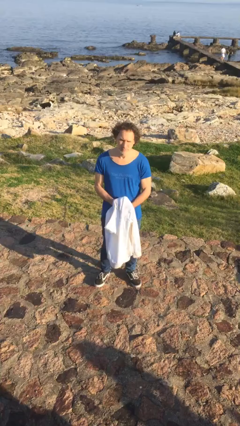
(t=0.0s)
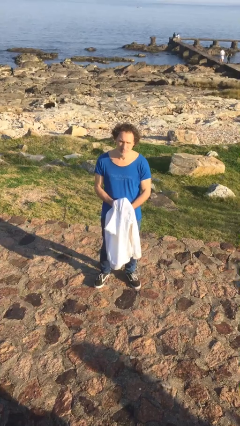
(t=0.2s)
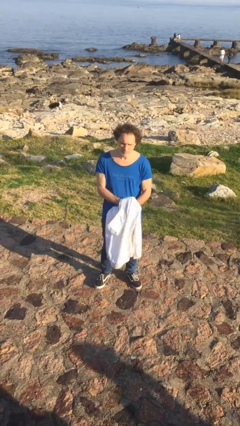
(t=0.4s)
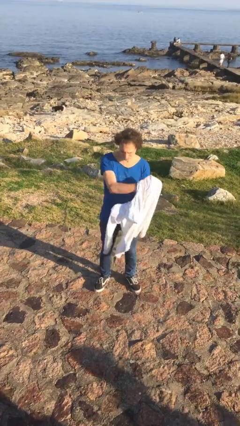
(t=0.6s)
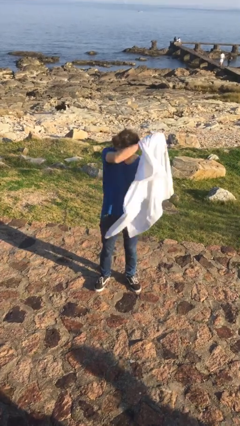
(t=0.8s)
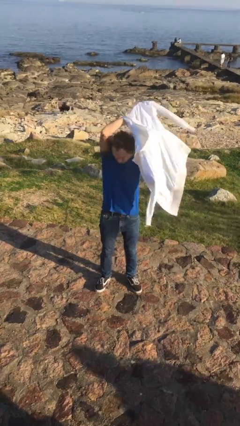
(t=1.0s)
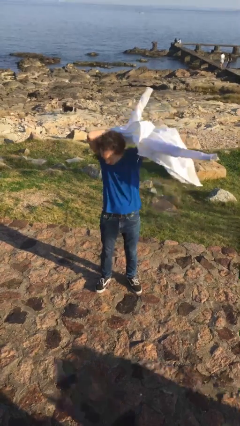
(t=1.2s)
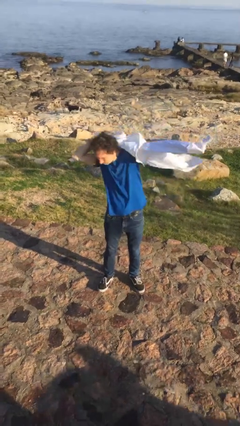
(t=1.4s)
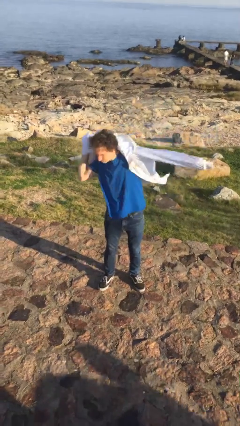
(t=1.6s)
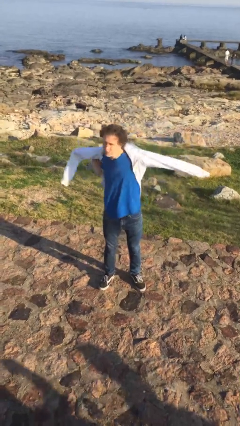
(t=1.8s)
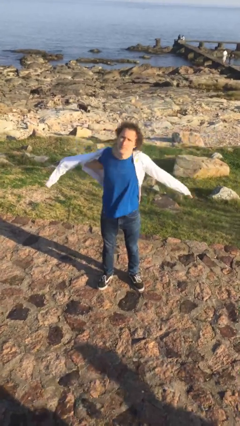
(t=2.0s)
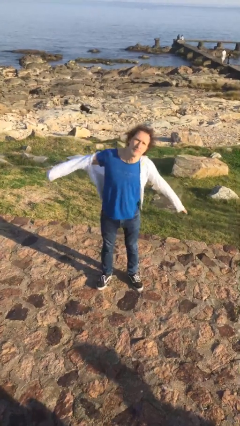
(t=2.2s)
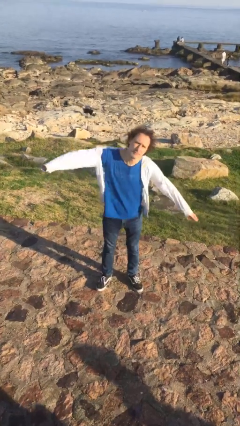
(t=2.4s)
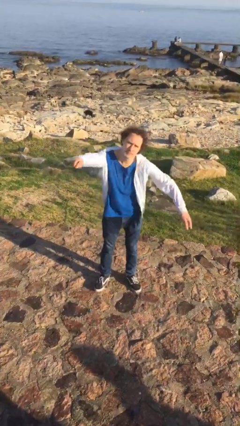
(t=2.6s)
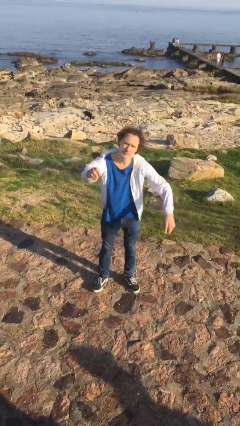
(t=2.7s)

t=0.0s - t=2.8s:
person puts on jacket

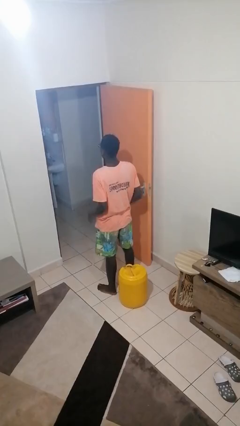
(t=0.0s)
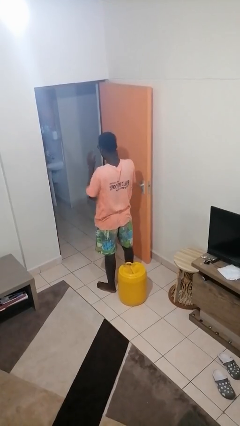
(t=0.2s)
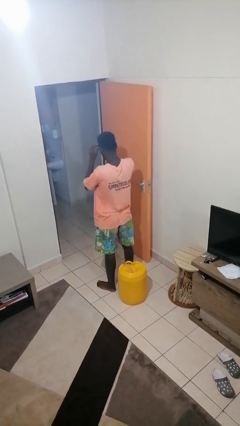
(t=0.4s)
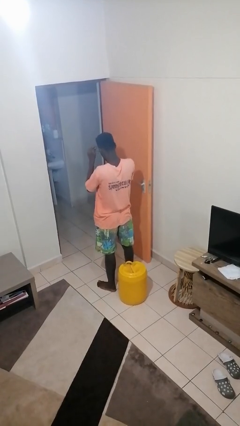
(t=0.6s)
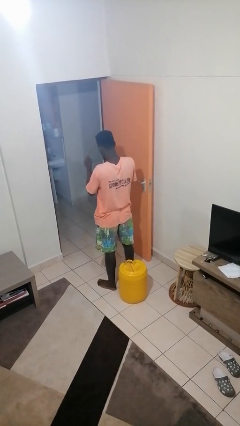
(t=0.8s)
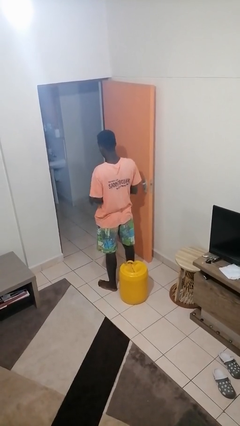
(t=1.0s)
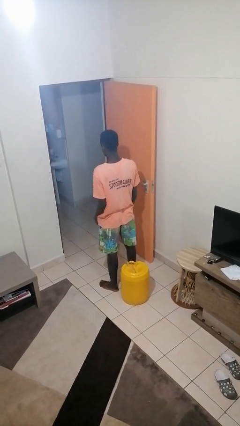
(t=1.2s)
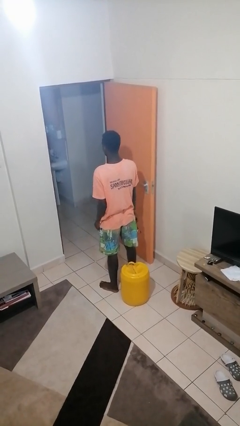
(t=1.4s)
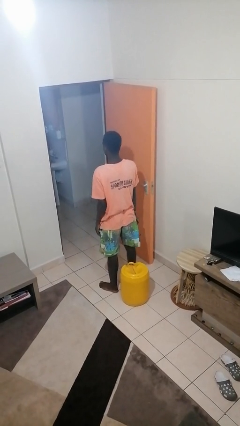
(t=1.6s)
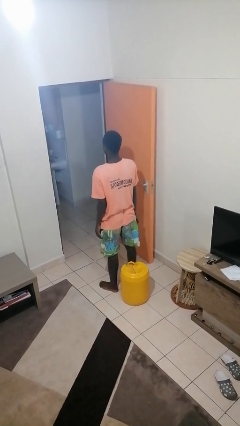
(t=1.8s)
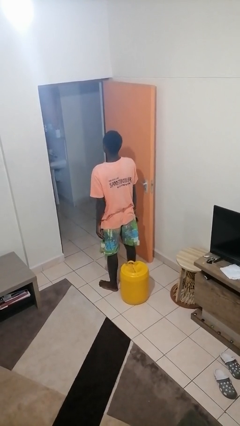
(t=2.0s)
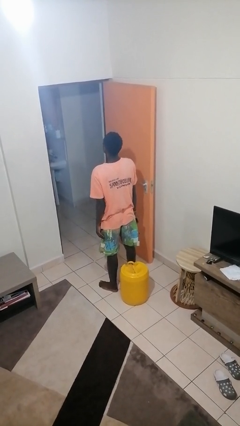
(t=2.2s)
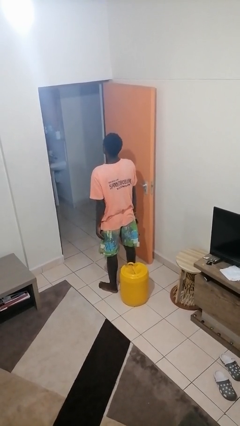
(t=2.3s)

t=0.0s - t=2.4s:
person takes off glasses

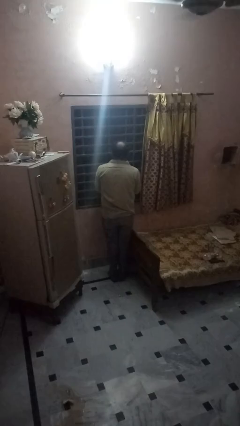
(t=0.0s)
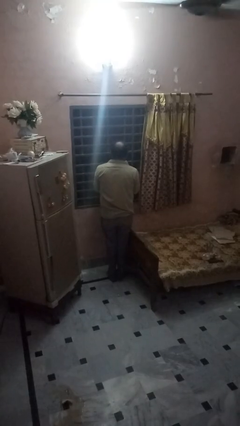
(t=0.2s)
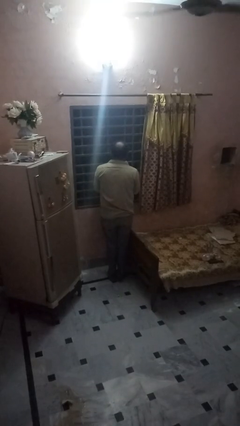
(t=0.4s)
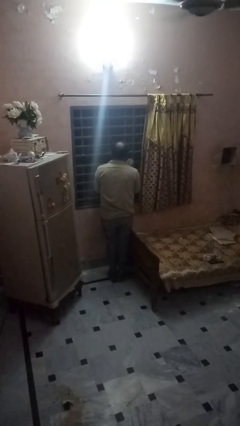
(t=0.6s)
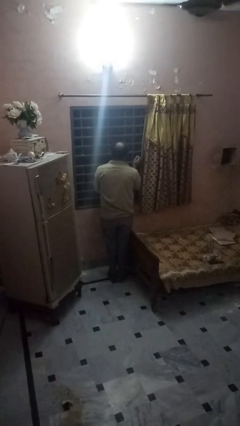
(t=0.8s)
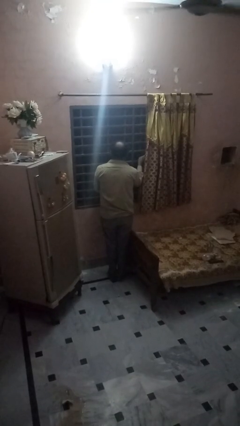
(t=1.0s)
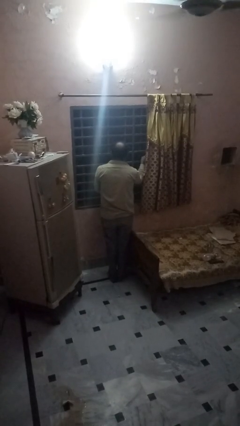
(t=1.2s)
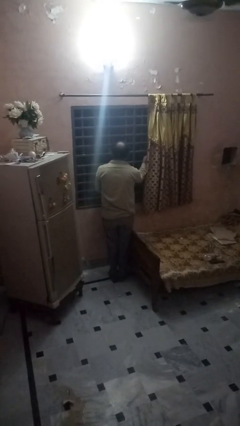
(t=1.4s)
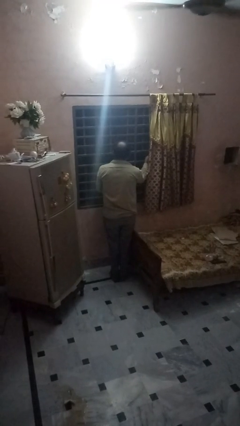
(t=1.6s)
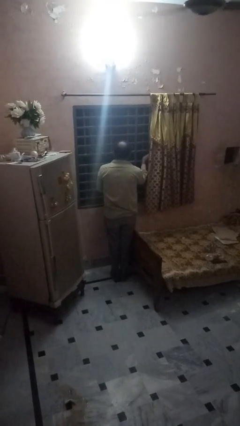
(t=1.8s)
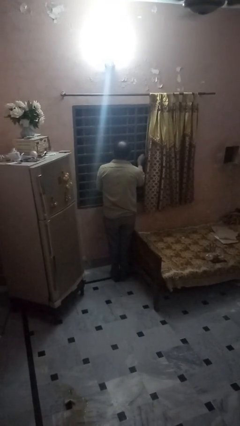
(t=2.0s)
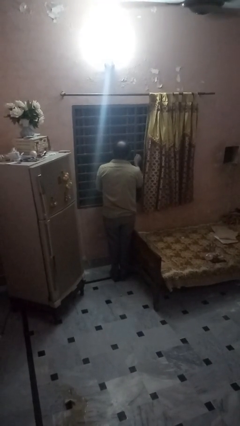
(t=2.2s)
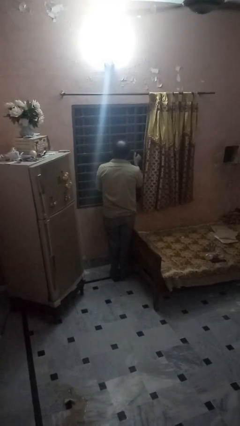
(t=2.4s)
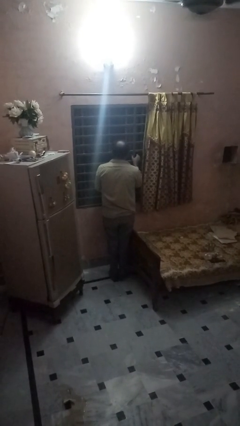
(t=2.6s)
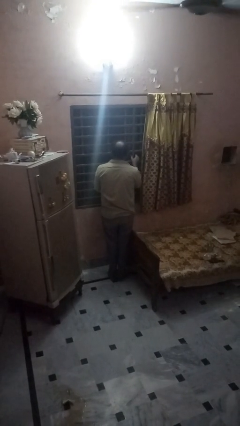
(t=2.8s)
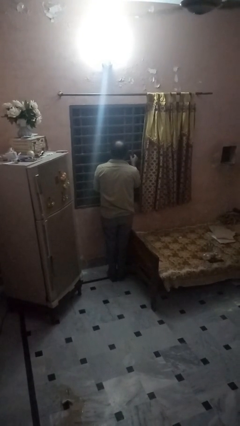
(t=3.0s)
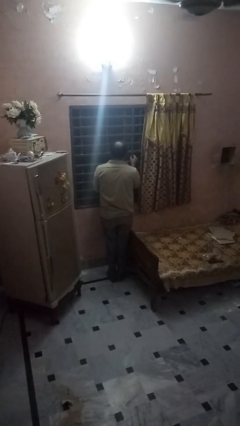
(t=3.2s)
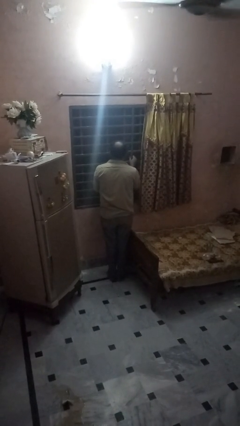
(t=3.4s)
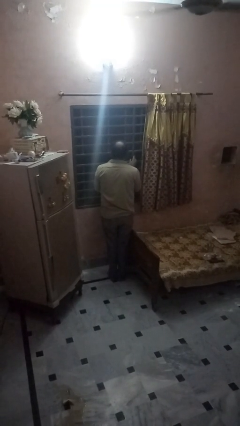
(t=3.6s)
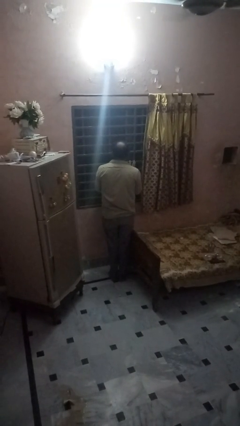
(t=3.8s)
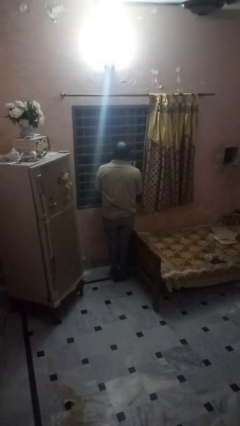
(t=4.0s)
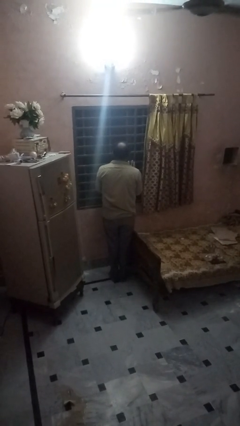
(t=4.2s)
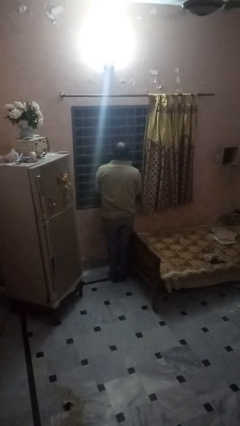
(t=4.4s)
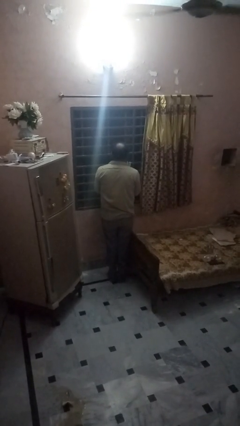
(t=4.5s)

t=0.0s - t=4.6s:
person closes home window

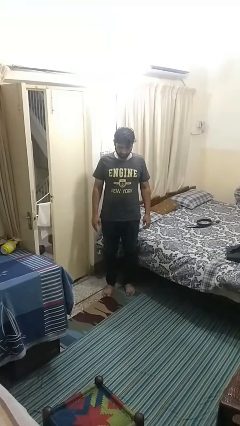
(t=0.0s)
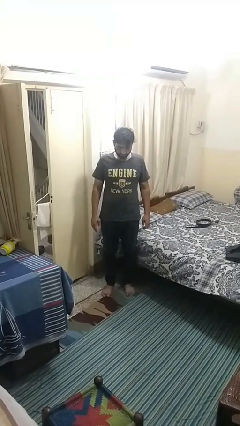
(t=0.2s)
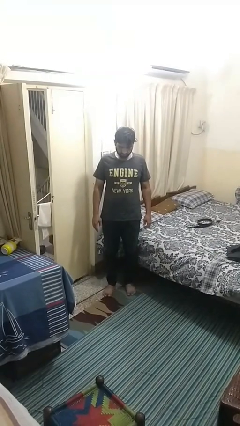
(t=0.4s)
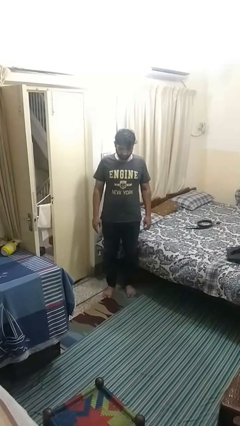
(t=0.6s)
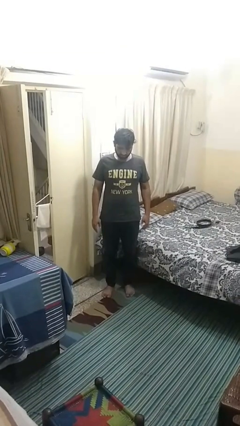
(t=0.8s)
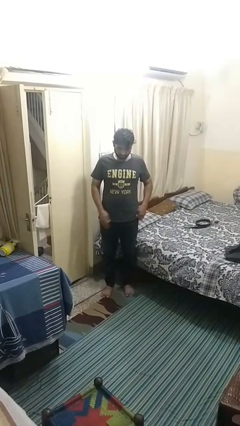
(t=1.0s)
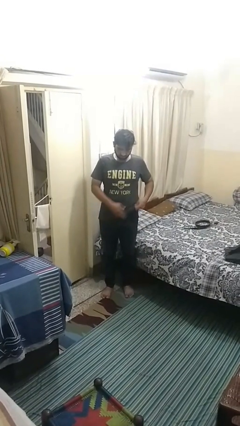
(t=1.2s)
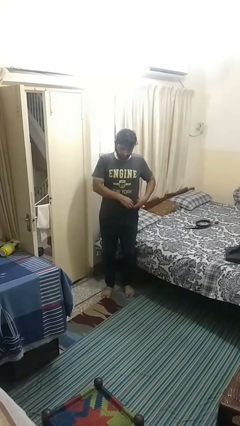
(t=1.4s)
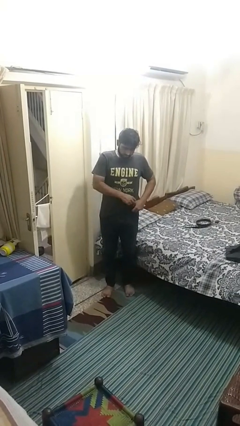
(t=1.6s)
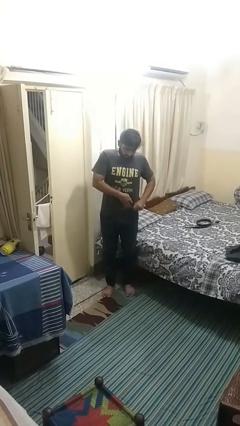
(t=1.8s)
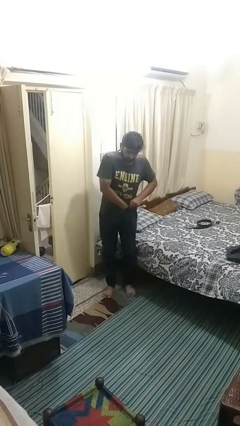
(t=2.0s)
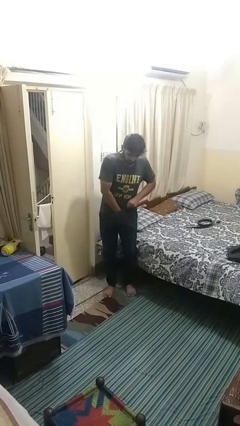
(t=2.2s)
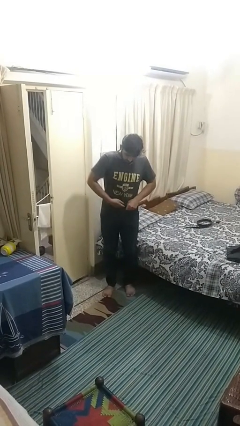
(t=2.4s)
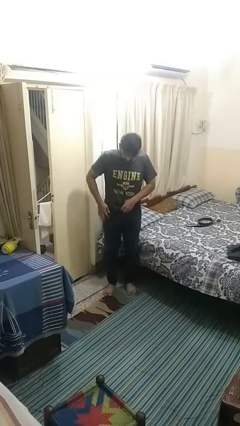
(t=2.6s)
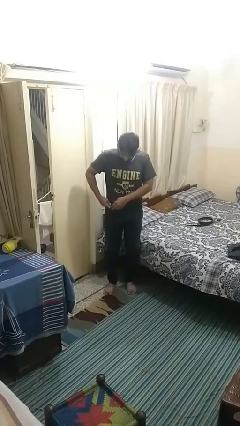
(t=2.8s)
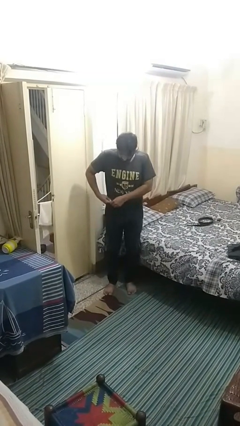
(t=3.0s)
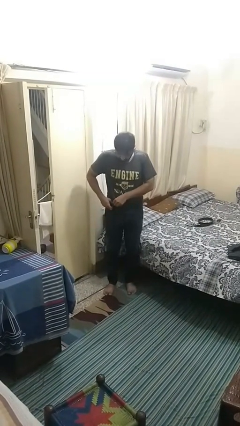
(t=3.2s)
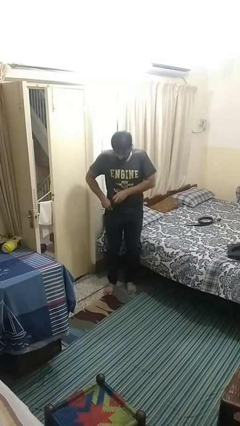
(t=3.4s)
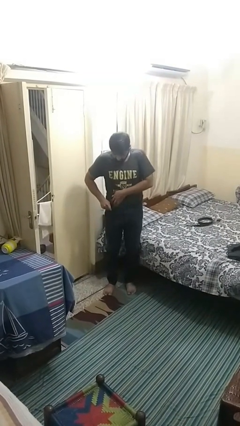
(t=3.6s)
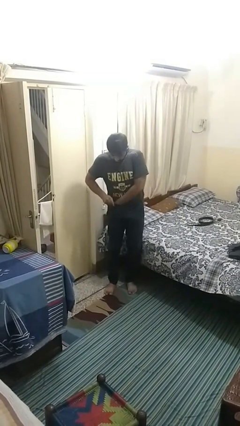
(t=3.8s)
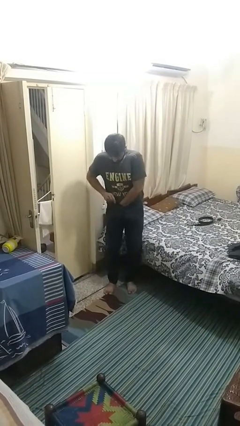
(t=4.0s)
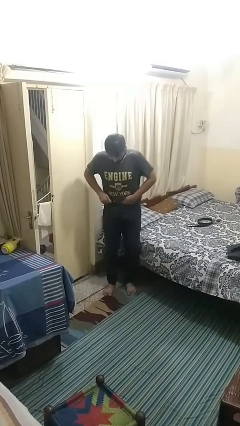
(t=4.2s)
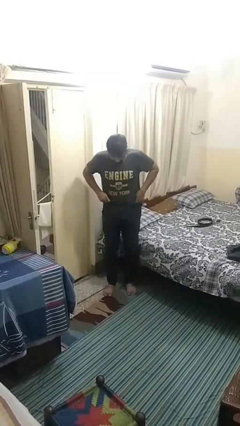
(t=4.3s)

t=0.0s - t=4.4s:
person tucks in shirt

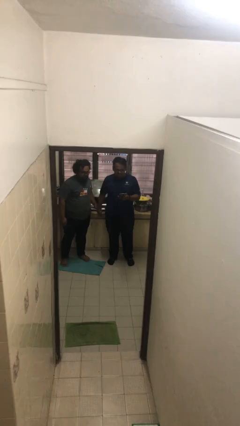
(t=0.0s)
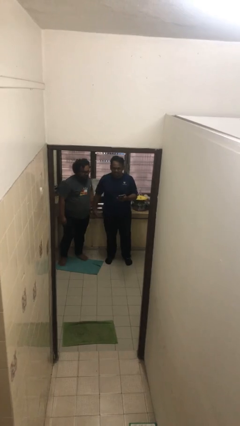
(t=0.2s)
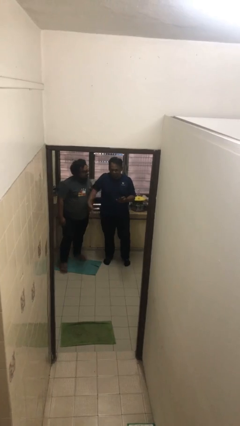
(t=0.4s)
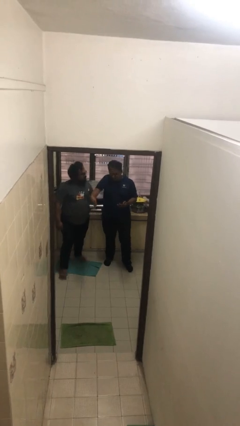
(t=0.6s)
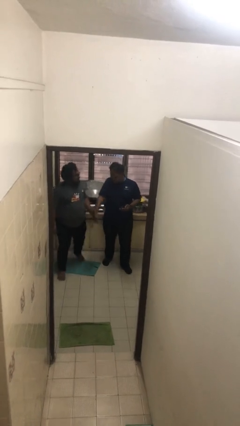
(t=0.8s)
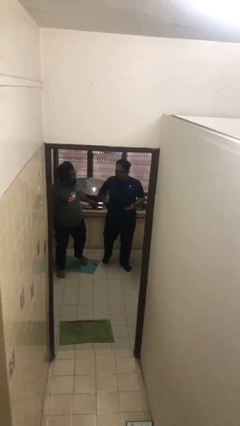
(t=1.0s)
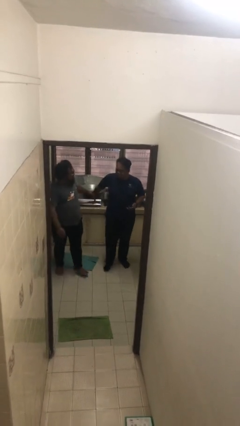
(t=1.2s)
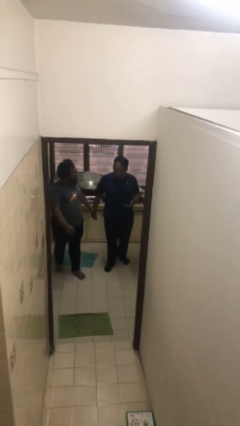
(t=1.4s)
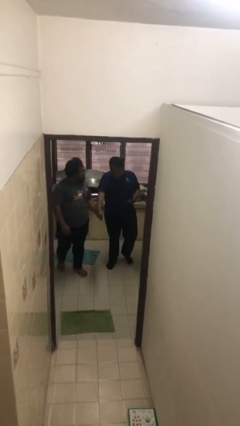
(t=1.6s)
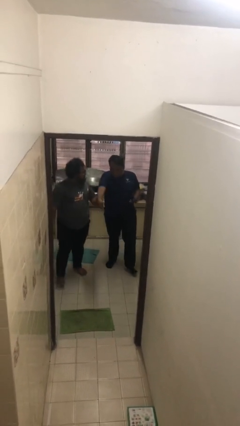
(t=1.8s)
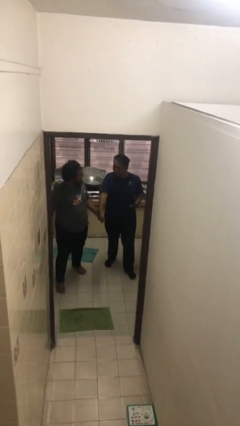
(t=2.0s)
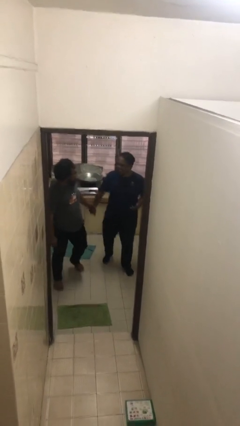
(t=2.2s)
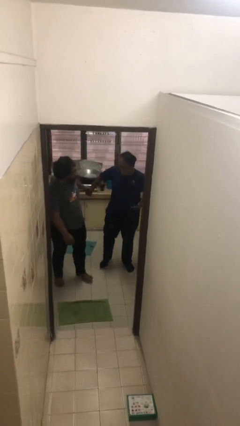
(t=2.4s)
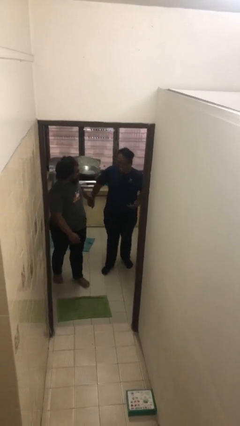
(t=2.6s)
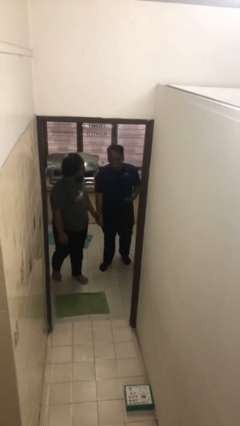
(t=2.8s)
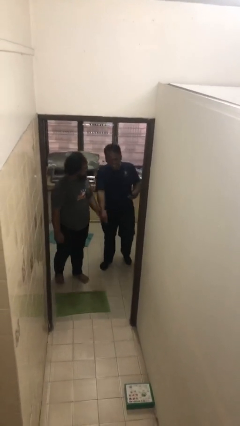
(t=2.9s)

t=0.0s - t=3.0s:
person holds hand

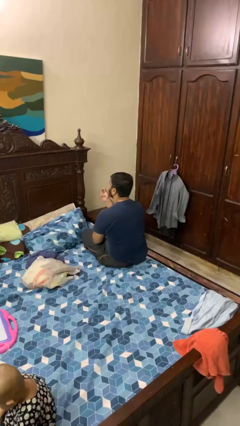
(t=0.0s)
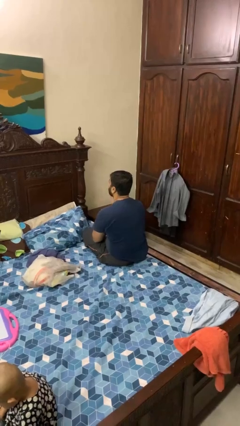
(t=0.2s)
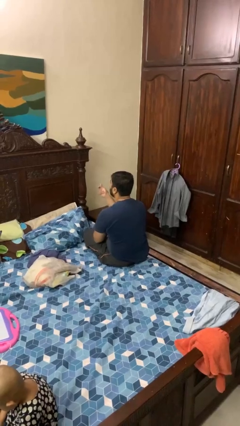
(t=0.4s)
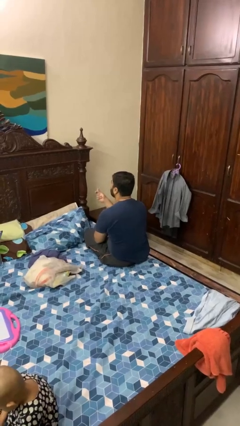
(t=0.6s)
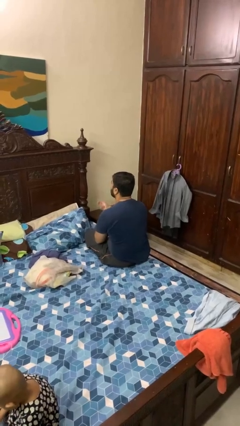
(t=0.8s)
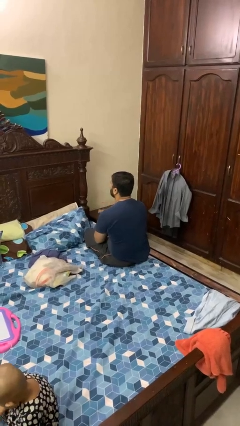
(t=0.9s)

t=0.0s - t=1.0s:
person snaps fingers
